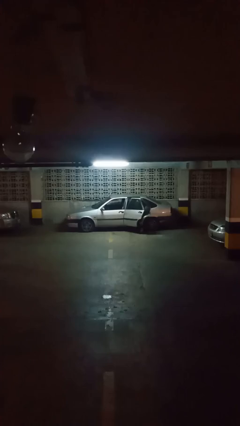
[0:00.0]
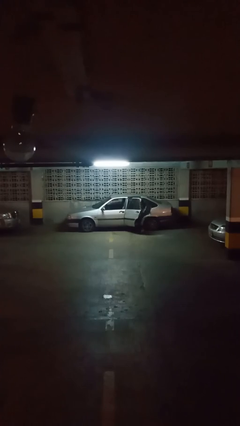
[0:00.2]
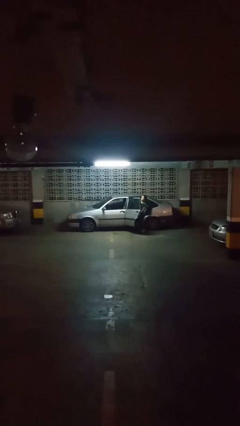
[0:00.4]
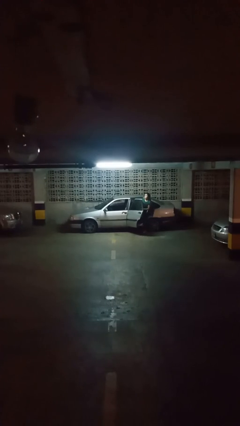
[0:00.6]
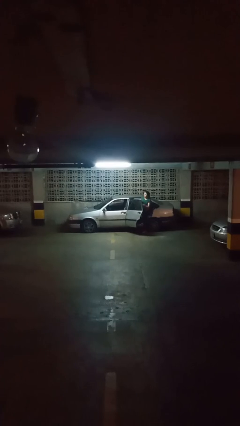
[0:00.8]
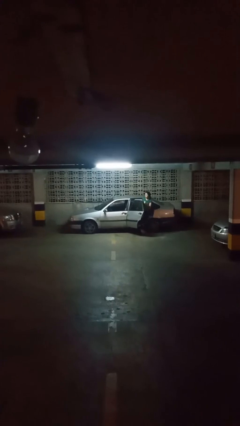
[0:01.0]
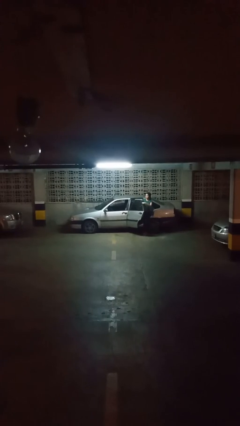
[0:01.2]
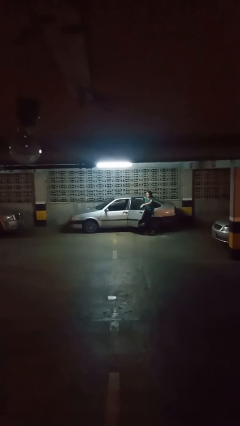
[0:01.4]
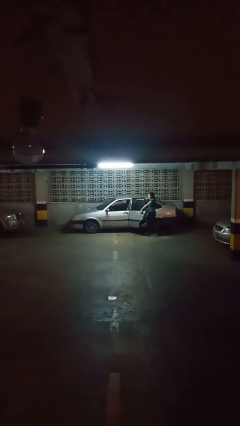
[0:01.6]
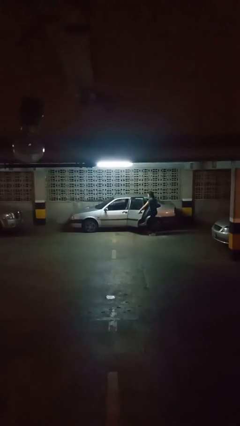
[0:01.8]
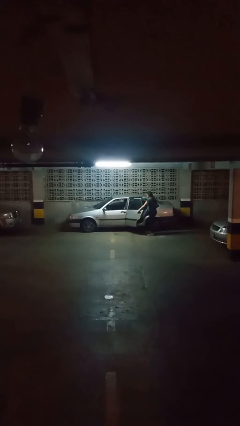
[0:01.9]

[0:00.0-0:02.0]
car drops off person

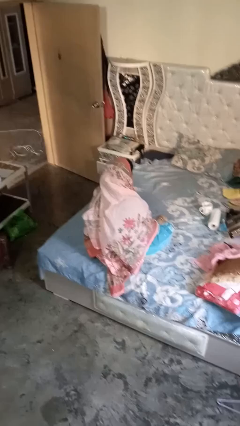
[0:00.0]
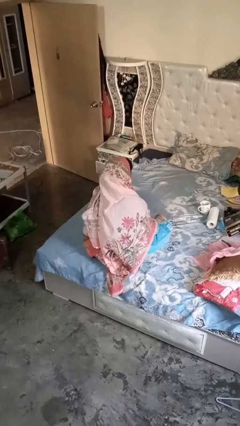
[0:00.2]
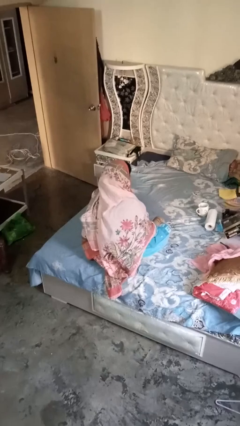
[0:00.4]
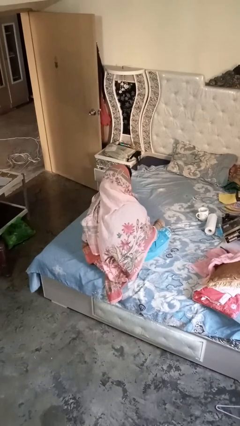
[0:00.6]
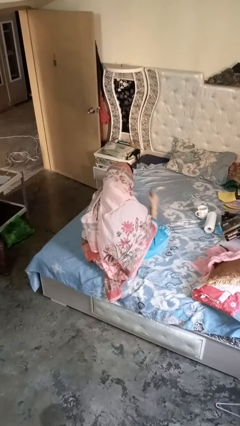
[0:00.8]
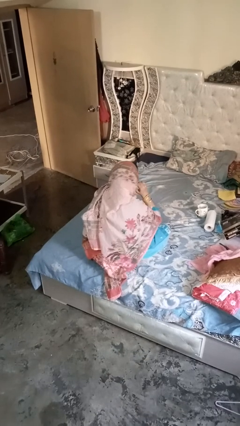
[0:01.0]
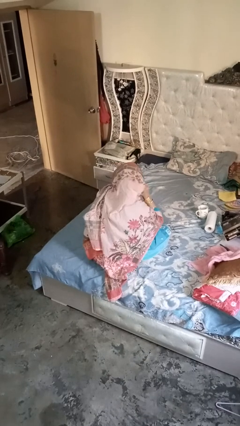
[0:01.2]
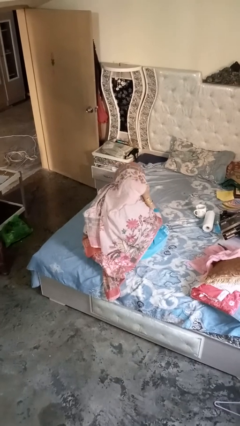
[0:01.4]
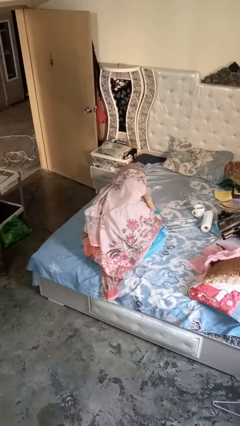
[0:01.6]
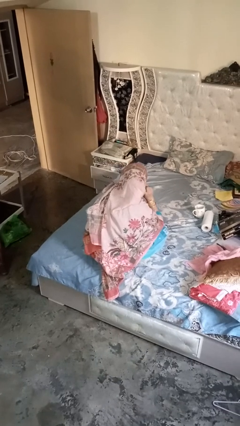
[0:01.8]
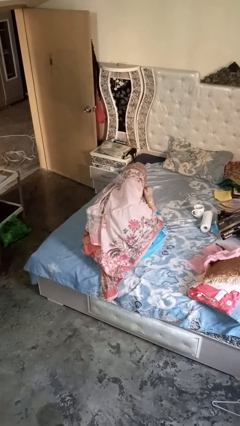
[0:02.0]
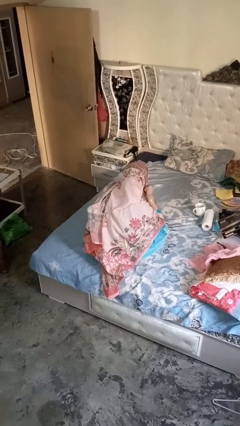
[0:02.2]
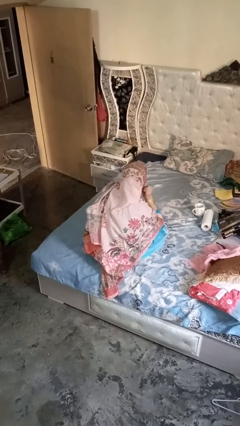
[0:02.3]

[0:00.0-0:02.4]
person gestures listen closely

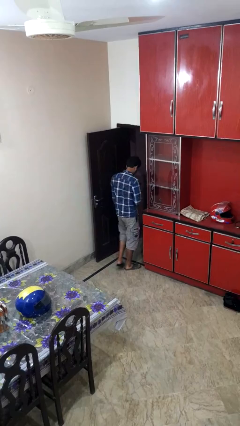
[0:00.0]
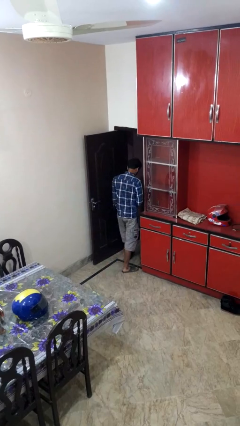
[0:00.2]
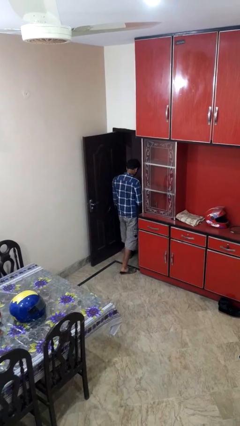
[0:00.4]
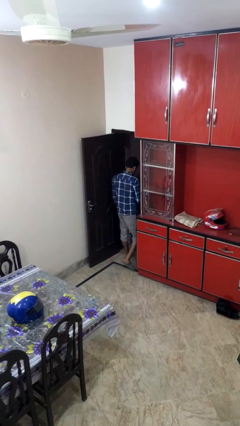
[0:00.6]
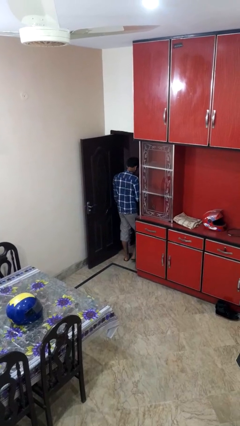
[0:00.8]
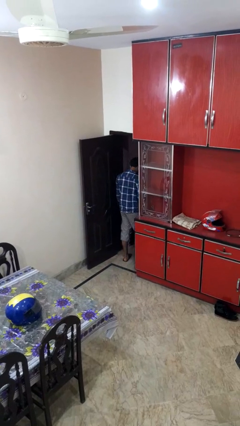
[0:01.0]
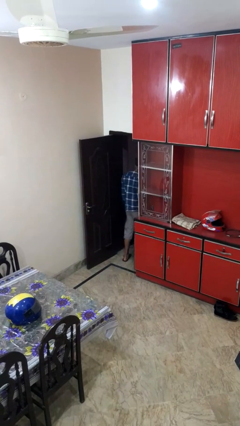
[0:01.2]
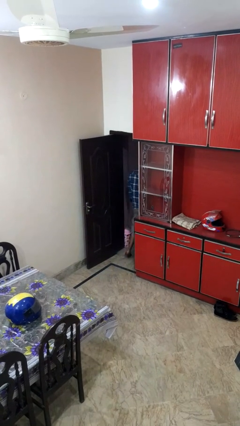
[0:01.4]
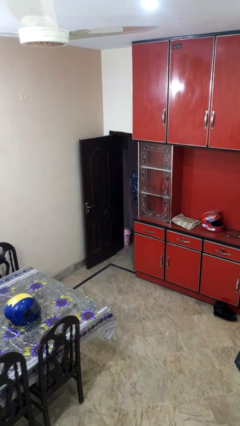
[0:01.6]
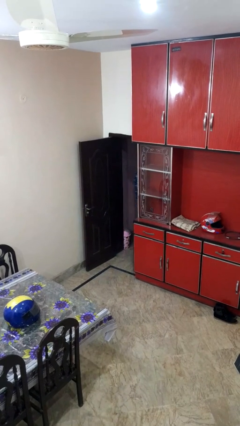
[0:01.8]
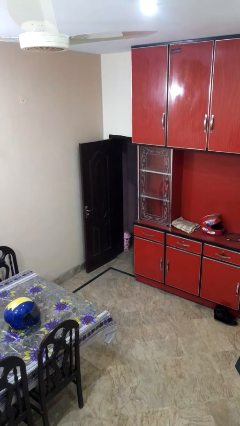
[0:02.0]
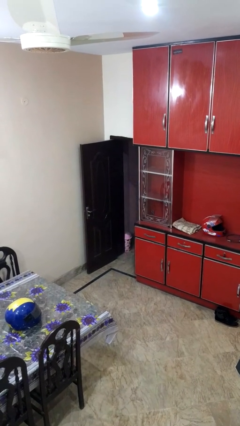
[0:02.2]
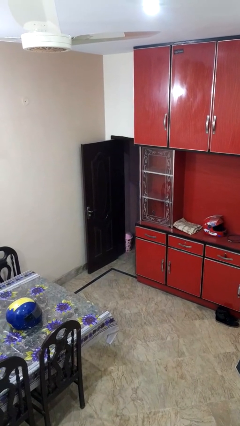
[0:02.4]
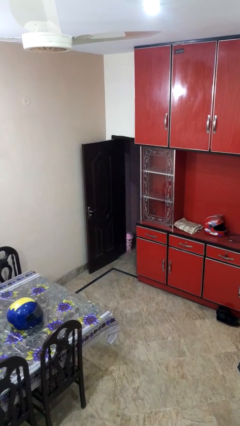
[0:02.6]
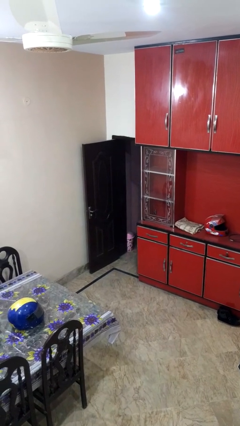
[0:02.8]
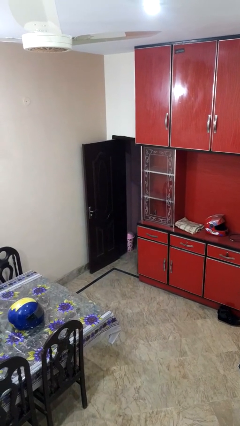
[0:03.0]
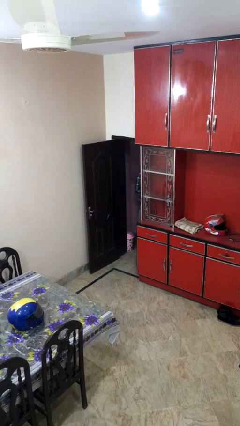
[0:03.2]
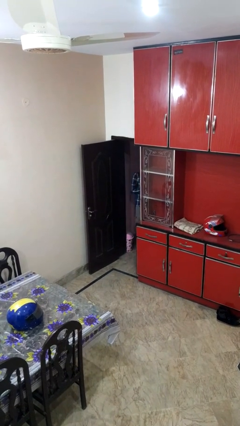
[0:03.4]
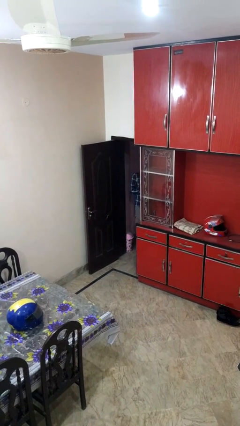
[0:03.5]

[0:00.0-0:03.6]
person exits scene through structure

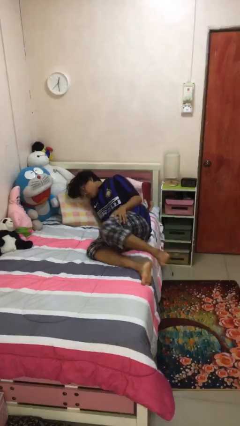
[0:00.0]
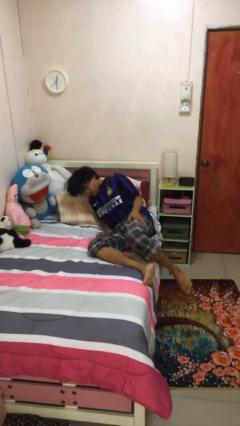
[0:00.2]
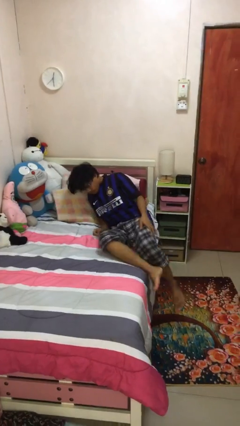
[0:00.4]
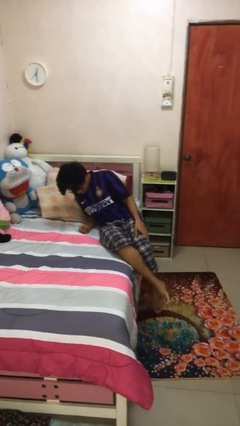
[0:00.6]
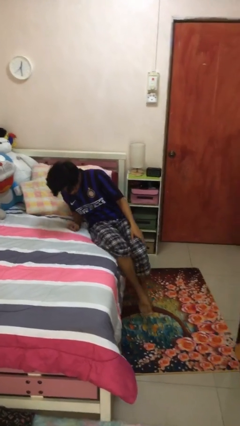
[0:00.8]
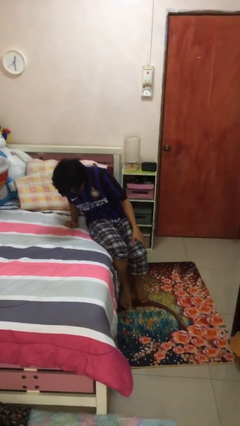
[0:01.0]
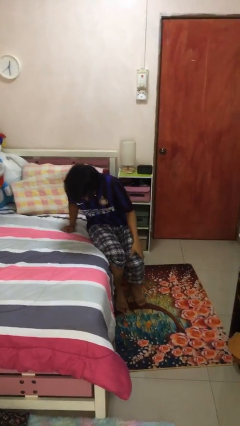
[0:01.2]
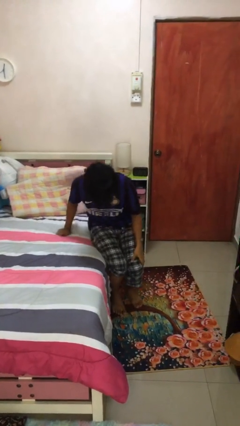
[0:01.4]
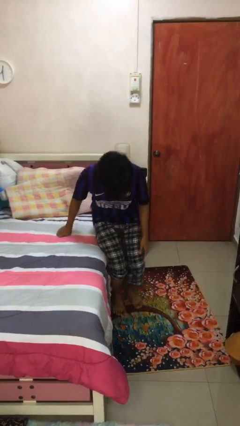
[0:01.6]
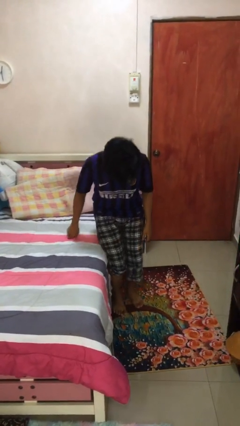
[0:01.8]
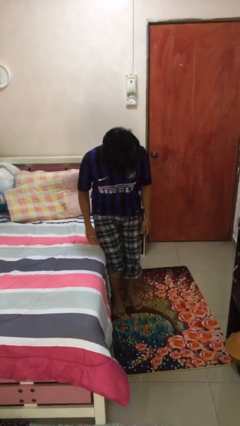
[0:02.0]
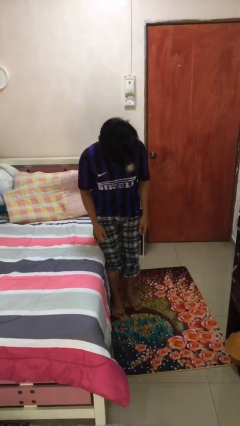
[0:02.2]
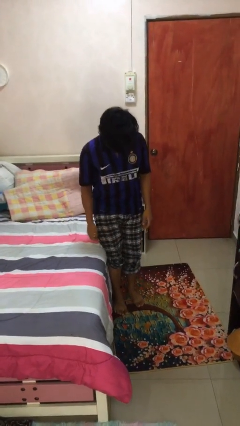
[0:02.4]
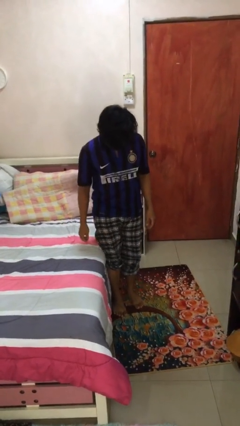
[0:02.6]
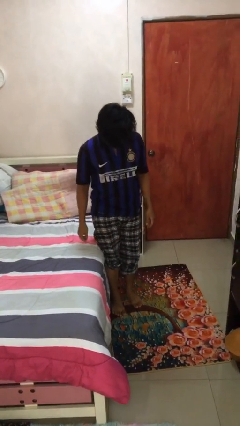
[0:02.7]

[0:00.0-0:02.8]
person stands up

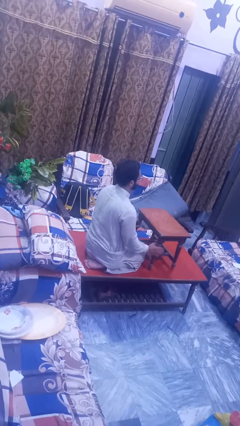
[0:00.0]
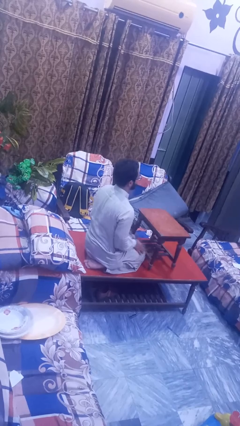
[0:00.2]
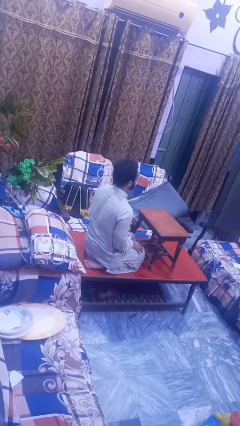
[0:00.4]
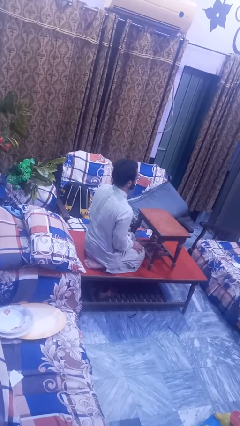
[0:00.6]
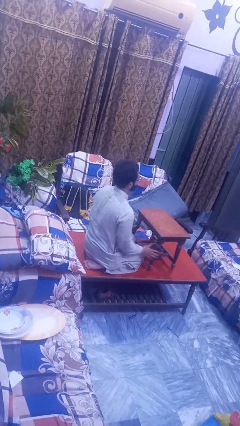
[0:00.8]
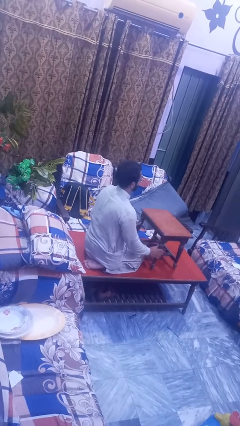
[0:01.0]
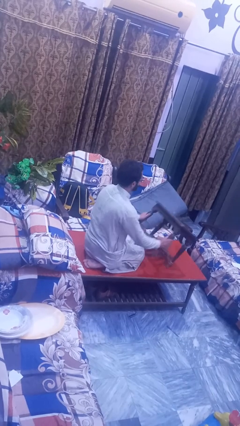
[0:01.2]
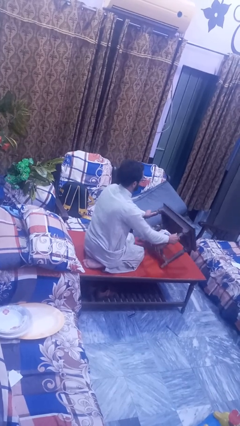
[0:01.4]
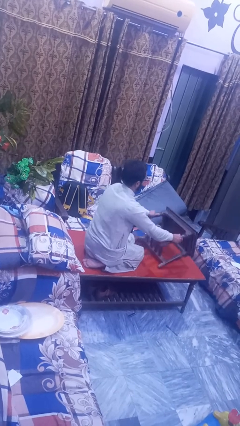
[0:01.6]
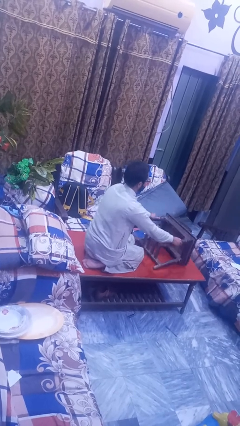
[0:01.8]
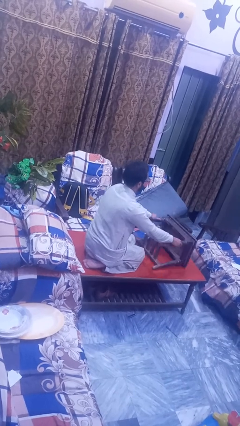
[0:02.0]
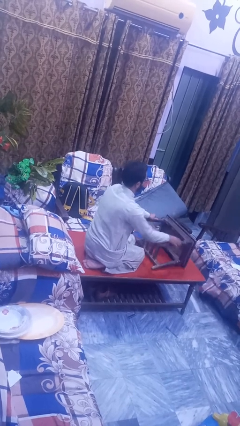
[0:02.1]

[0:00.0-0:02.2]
person knocks over furniture

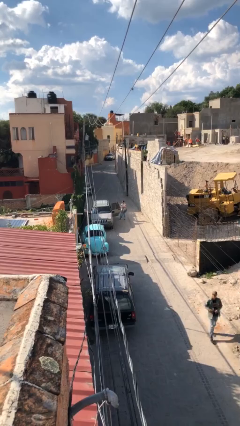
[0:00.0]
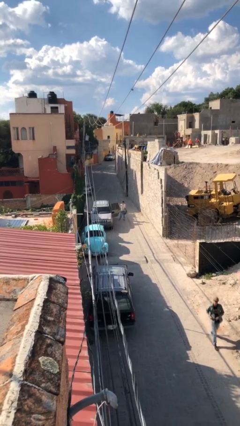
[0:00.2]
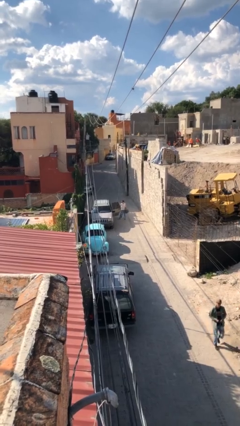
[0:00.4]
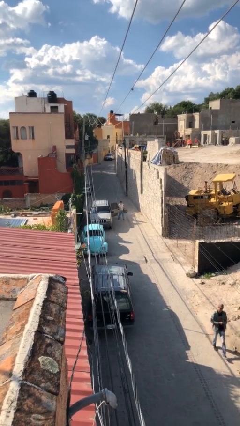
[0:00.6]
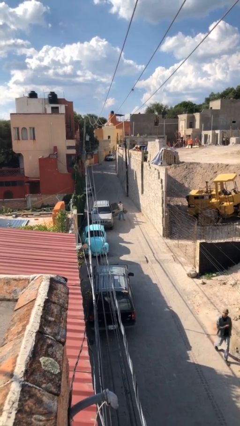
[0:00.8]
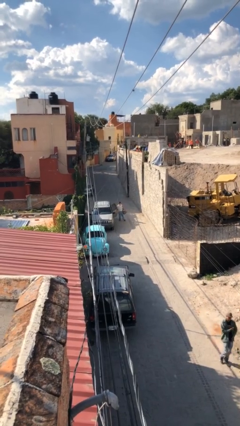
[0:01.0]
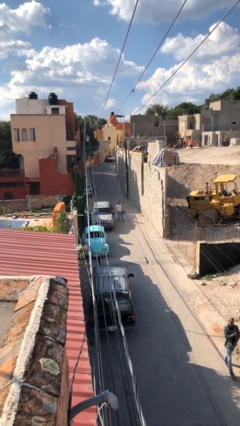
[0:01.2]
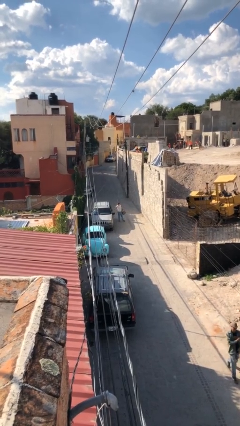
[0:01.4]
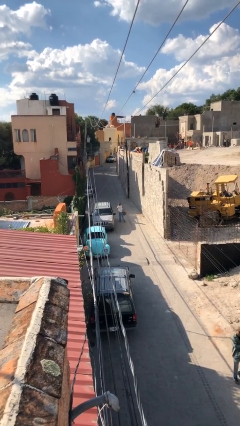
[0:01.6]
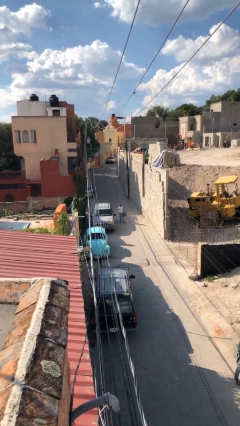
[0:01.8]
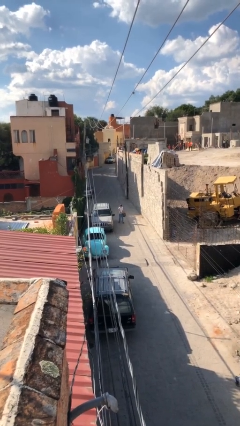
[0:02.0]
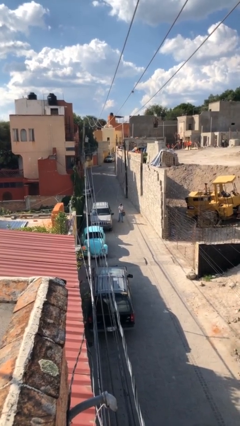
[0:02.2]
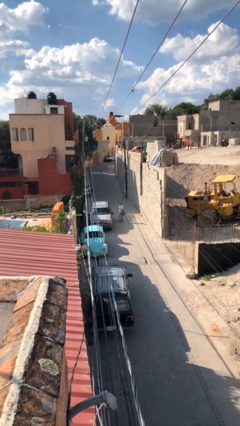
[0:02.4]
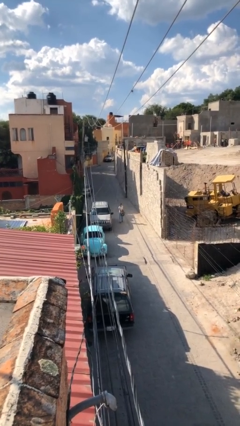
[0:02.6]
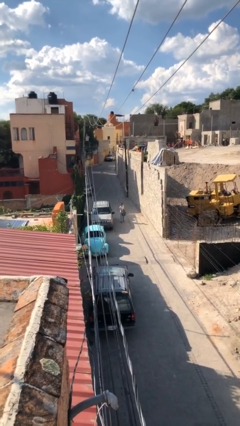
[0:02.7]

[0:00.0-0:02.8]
person closes car door

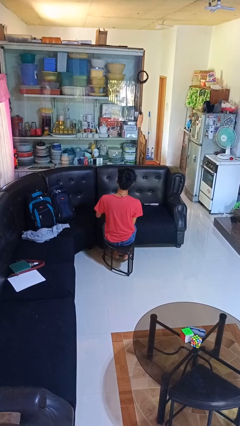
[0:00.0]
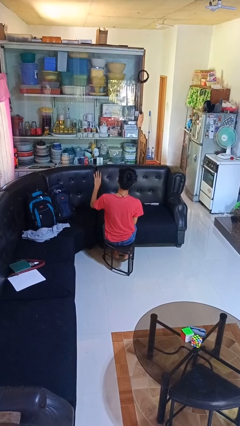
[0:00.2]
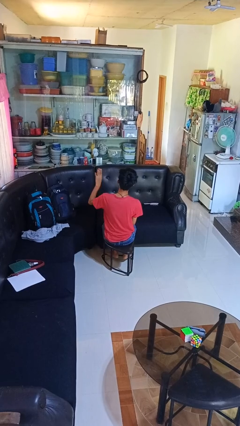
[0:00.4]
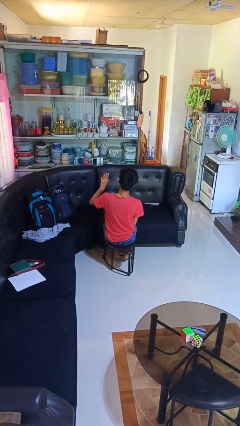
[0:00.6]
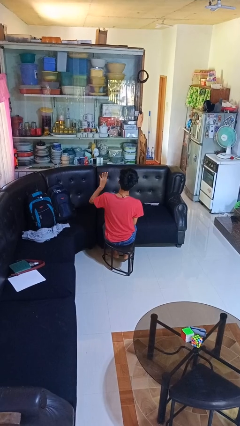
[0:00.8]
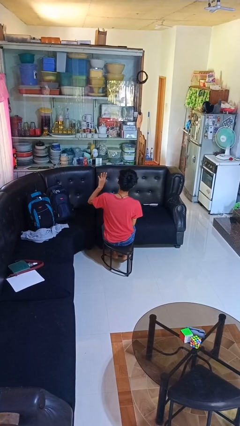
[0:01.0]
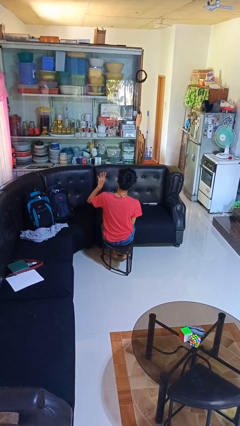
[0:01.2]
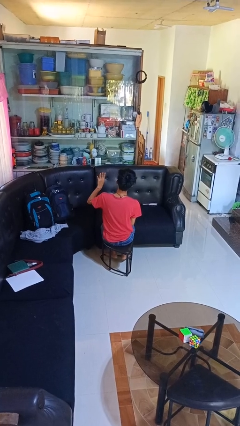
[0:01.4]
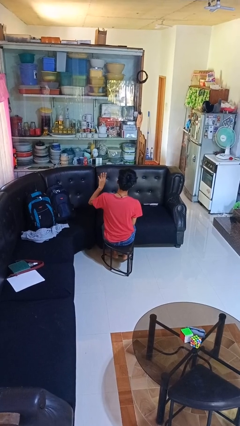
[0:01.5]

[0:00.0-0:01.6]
person gestures number four

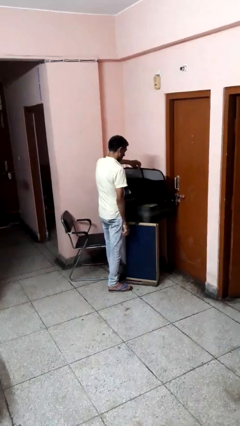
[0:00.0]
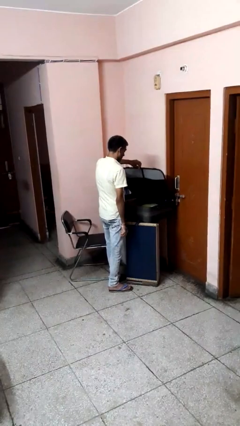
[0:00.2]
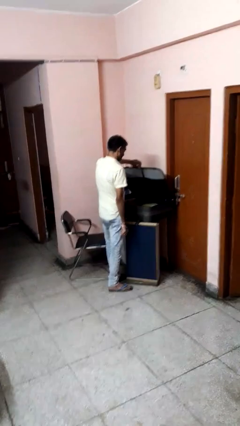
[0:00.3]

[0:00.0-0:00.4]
person opens suitcase
